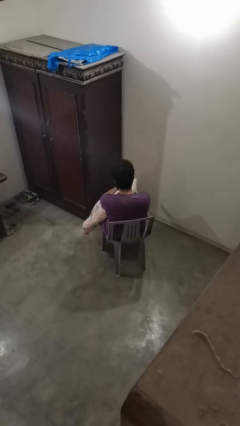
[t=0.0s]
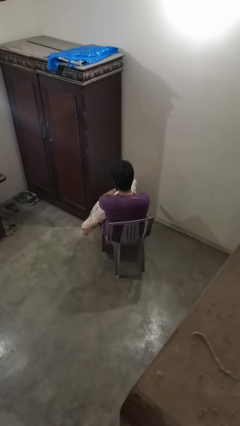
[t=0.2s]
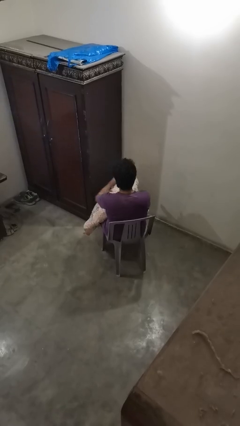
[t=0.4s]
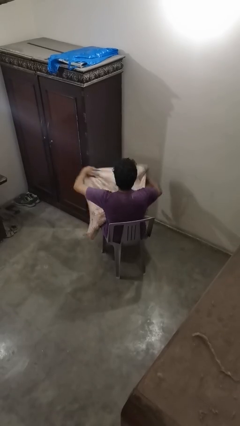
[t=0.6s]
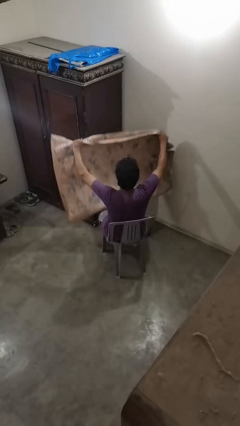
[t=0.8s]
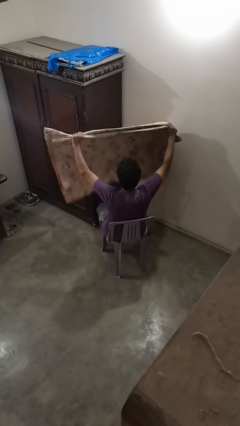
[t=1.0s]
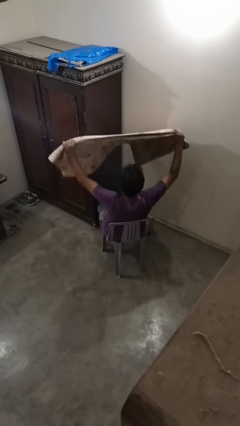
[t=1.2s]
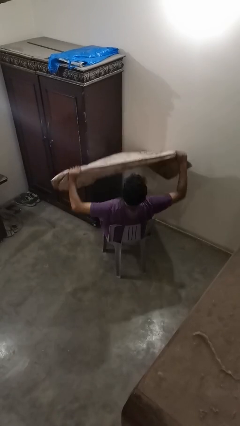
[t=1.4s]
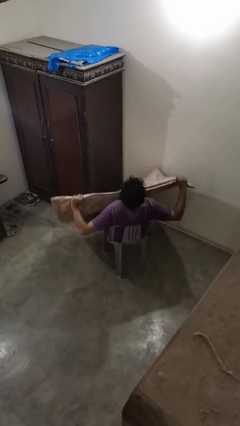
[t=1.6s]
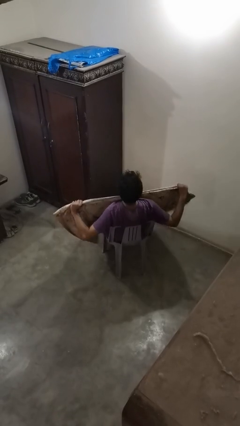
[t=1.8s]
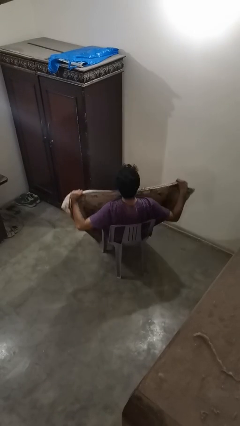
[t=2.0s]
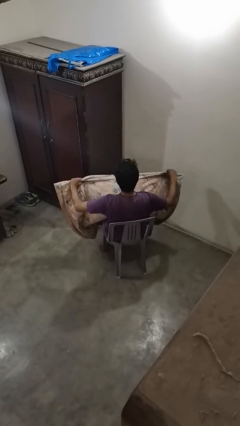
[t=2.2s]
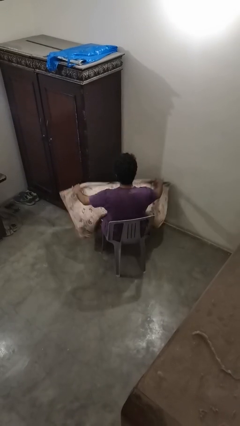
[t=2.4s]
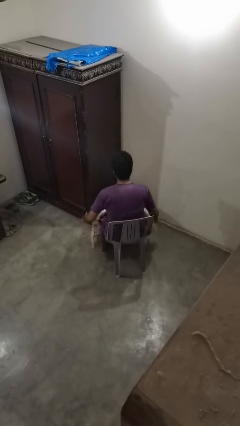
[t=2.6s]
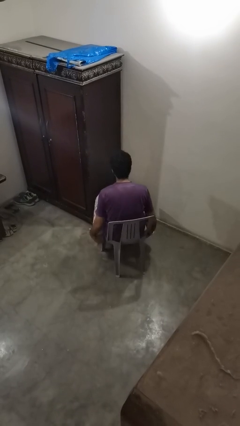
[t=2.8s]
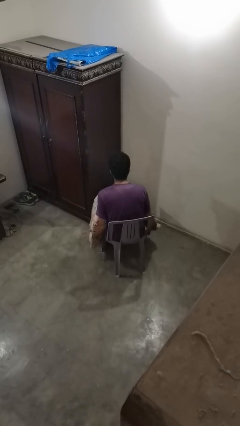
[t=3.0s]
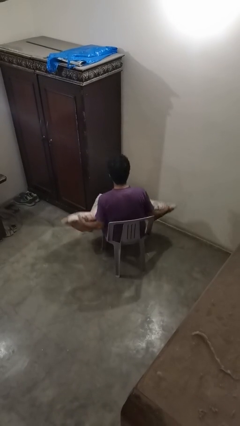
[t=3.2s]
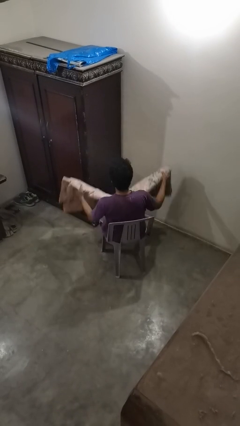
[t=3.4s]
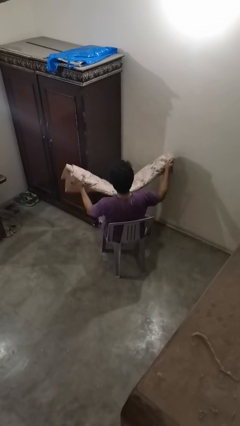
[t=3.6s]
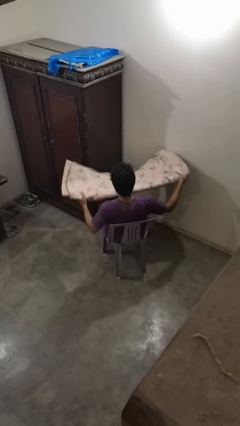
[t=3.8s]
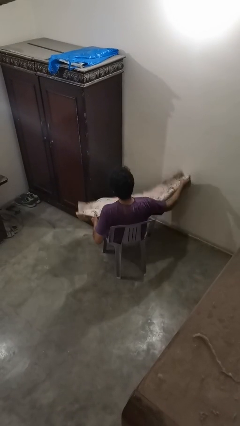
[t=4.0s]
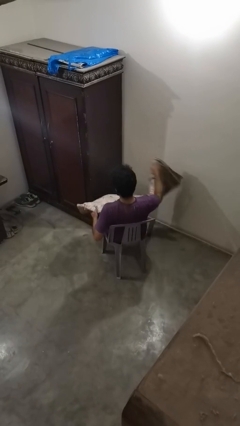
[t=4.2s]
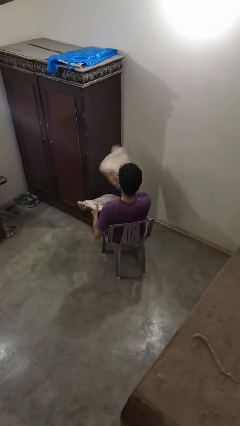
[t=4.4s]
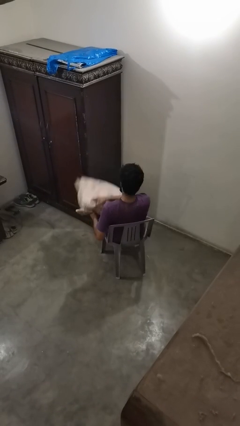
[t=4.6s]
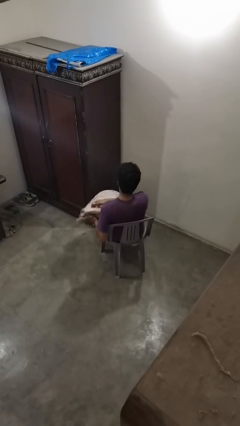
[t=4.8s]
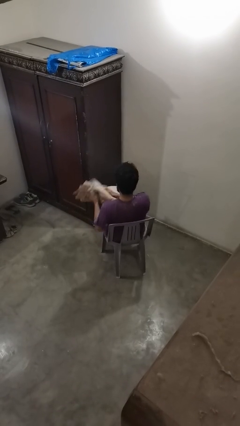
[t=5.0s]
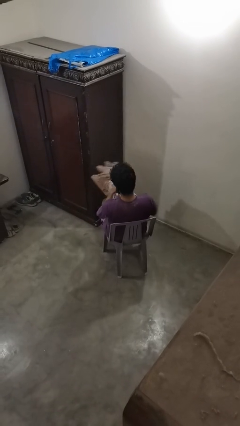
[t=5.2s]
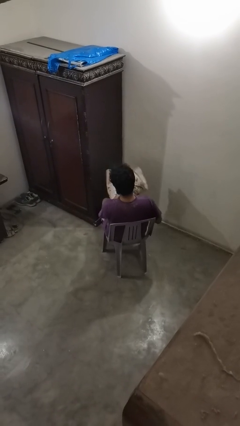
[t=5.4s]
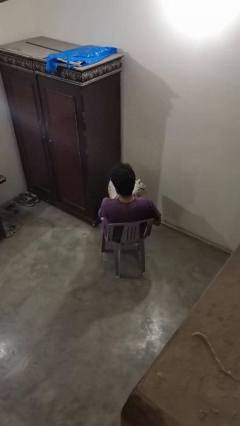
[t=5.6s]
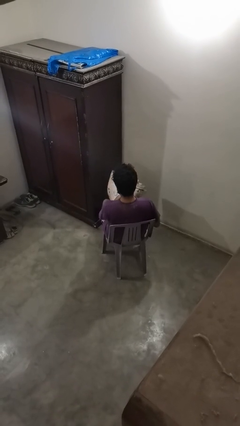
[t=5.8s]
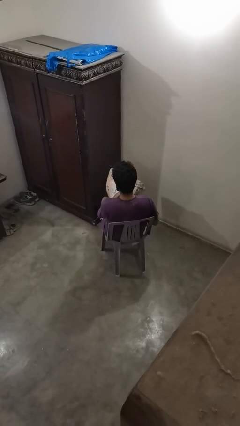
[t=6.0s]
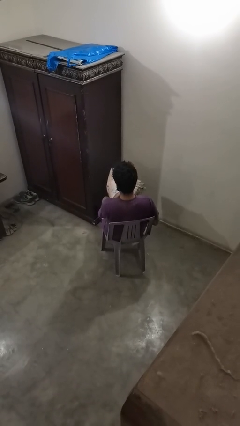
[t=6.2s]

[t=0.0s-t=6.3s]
person folds blanket

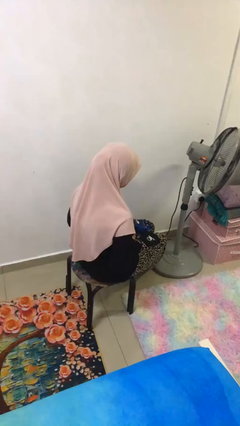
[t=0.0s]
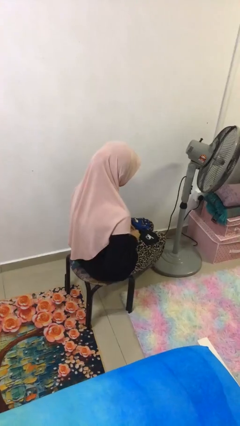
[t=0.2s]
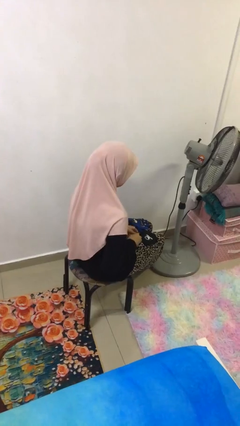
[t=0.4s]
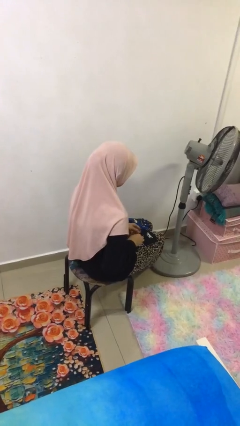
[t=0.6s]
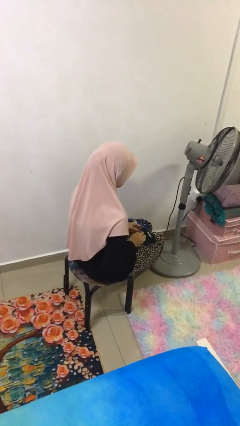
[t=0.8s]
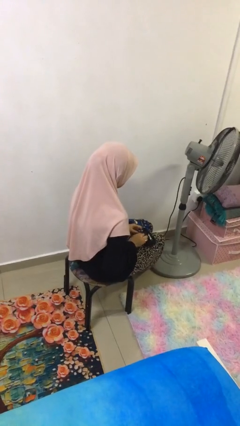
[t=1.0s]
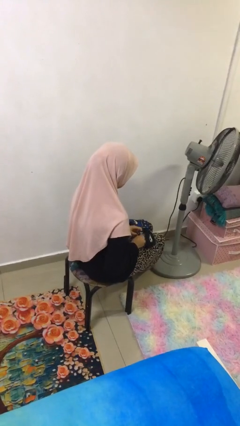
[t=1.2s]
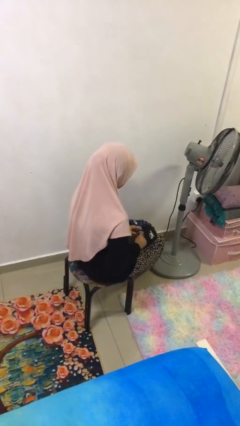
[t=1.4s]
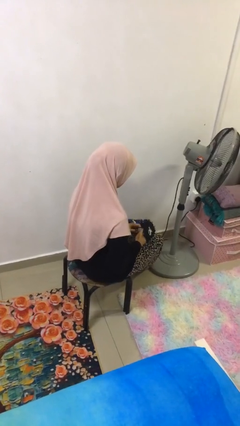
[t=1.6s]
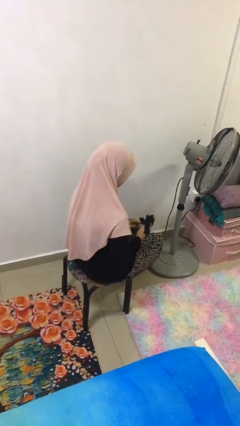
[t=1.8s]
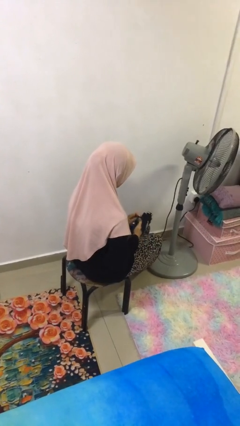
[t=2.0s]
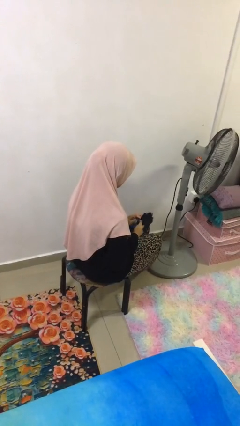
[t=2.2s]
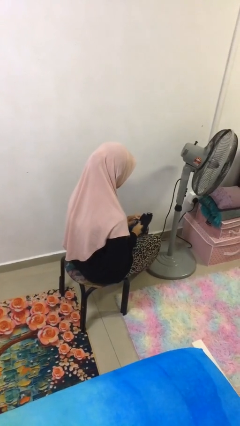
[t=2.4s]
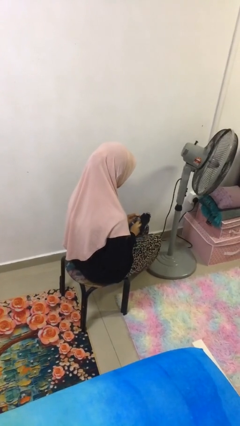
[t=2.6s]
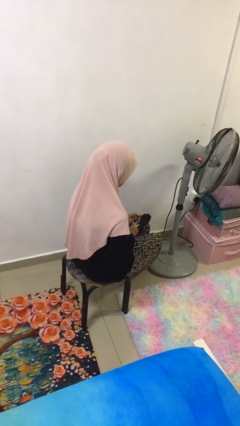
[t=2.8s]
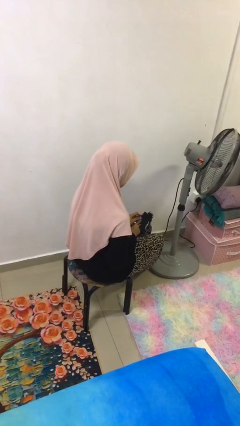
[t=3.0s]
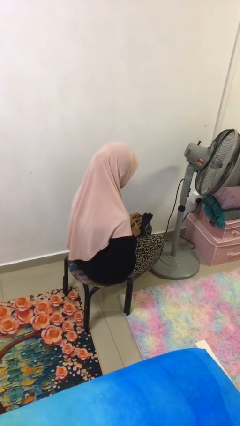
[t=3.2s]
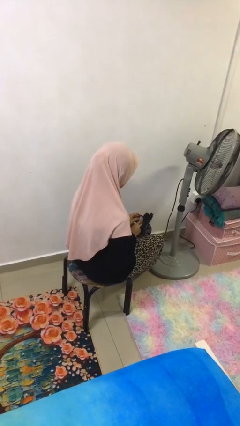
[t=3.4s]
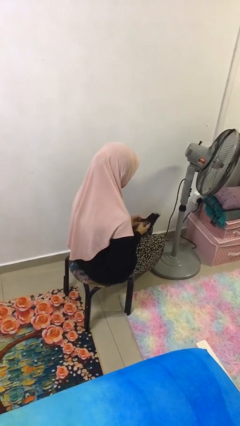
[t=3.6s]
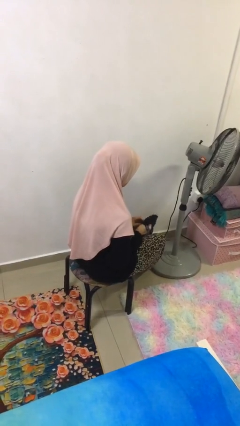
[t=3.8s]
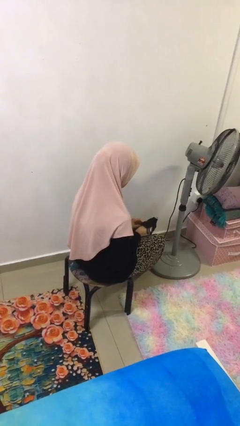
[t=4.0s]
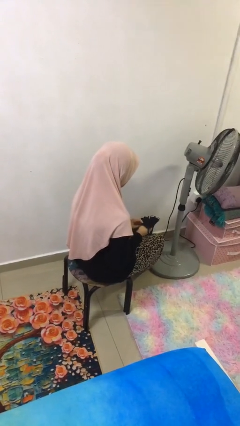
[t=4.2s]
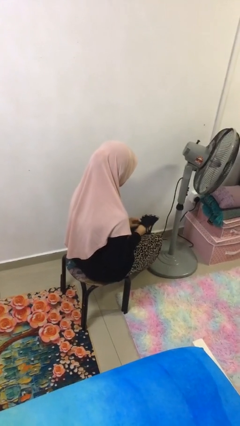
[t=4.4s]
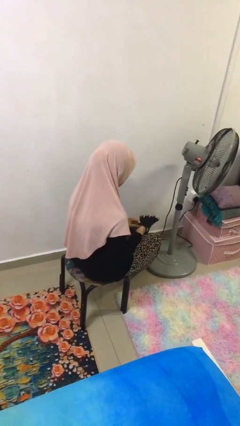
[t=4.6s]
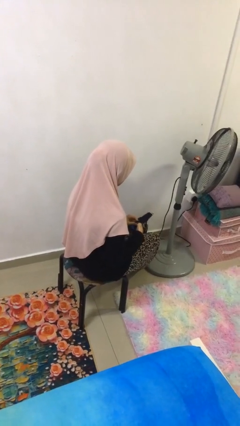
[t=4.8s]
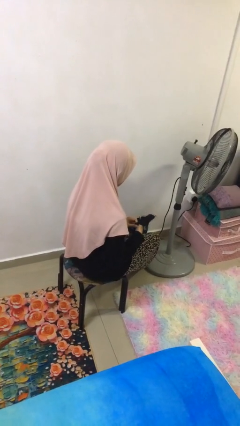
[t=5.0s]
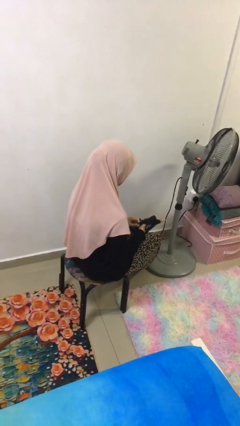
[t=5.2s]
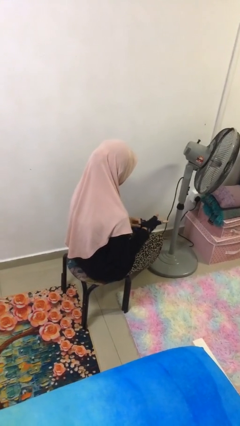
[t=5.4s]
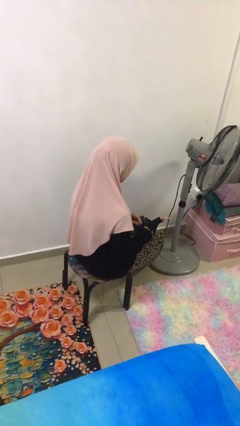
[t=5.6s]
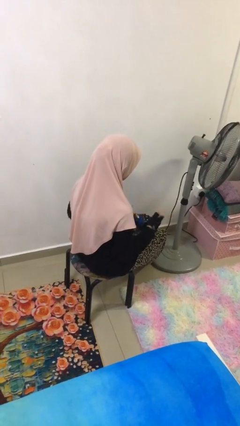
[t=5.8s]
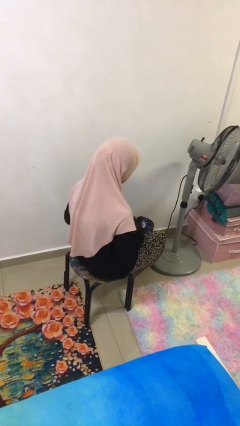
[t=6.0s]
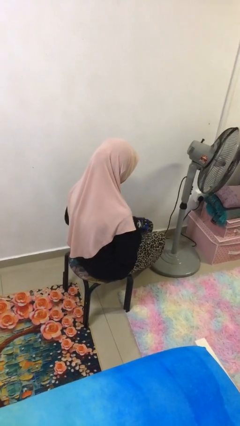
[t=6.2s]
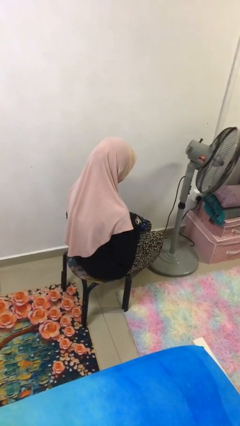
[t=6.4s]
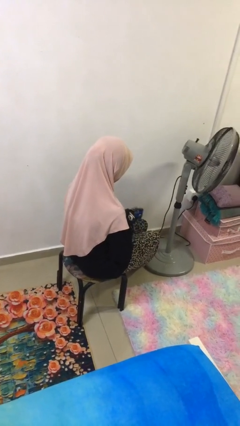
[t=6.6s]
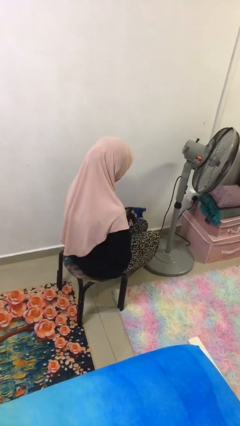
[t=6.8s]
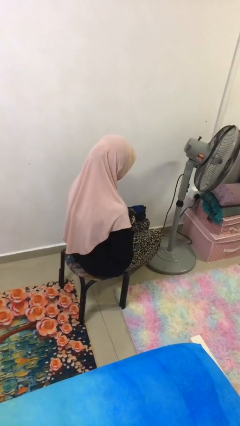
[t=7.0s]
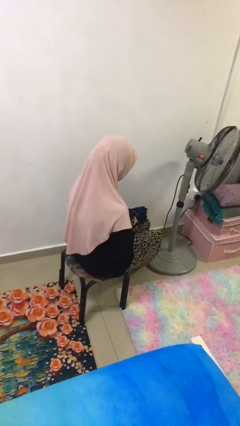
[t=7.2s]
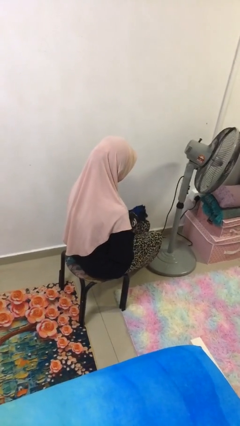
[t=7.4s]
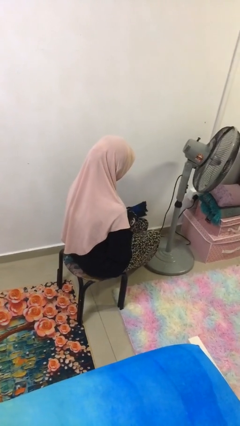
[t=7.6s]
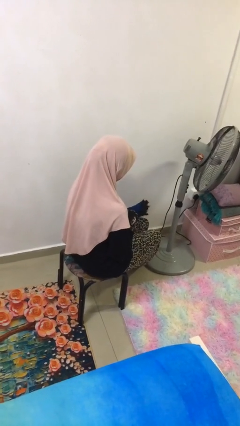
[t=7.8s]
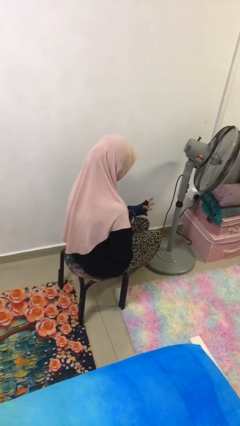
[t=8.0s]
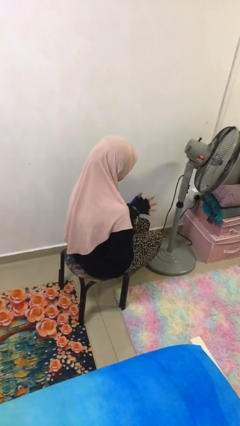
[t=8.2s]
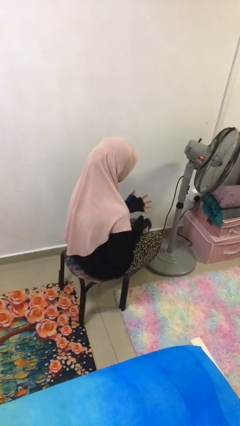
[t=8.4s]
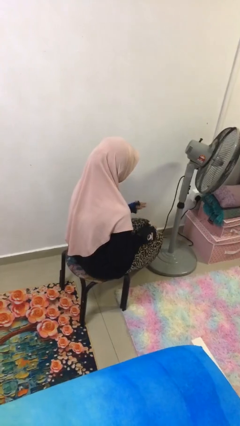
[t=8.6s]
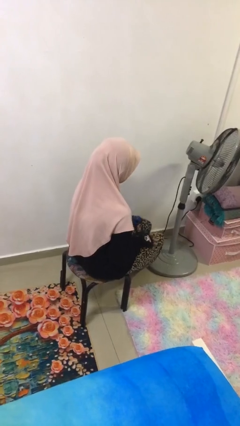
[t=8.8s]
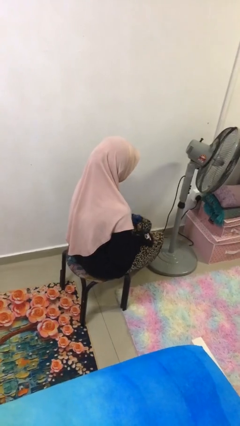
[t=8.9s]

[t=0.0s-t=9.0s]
person puts on gloves

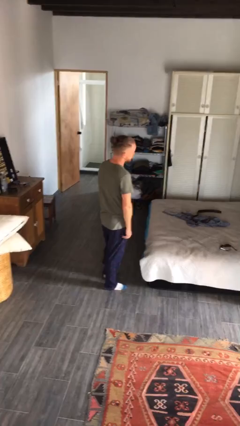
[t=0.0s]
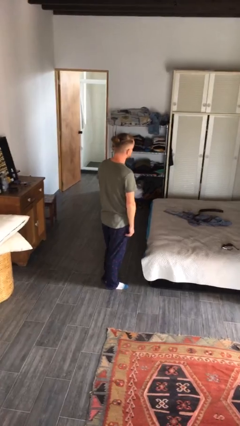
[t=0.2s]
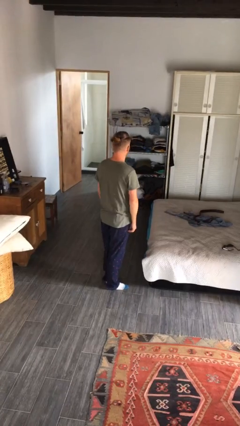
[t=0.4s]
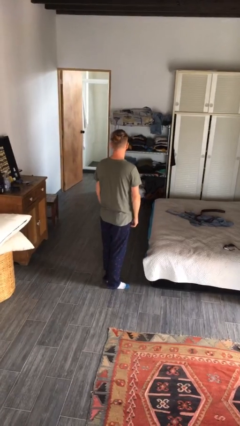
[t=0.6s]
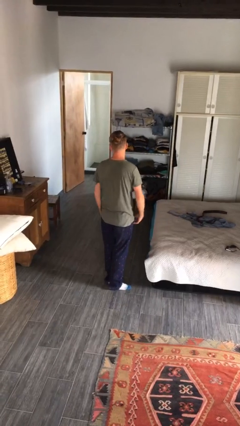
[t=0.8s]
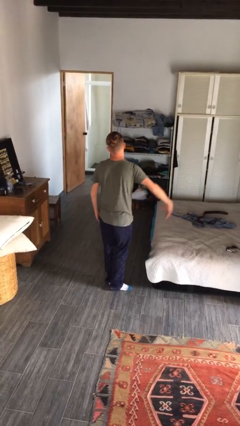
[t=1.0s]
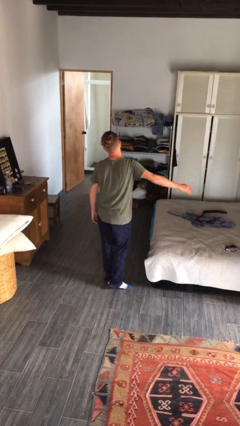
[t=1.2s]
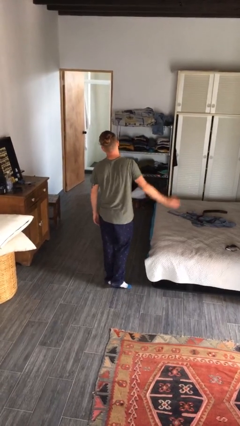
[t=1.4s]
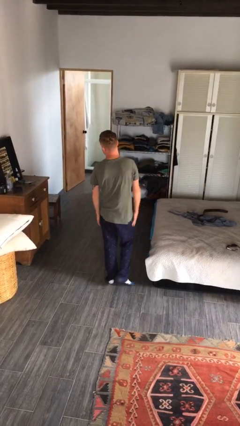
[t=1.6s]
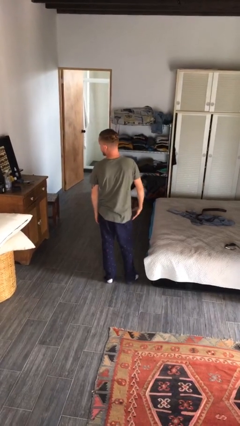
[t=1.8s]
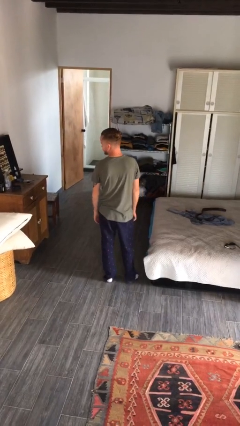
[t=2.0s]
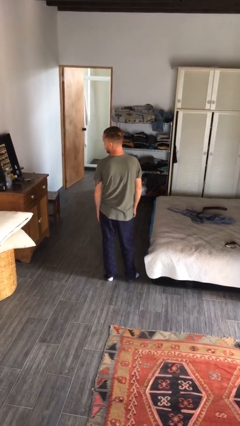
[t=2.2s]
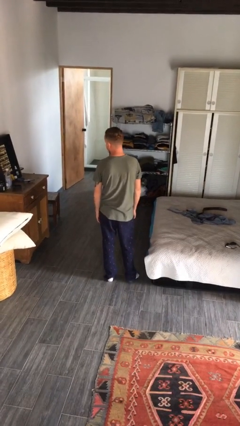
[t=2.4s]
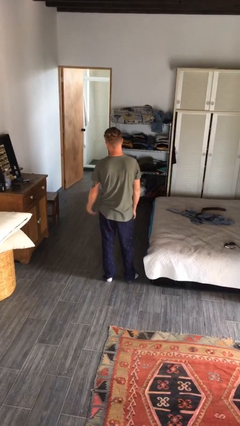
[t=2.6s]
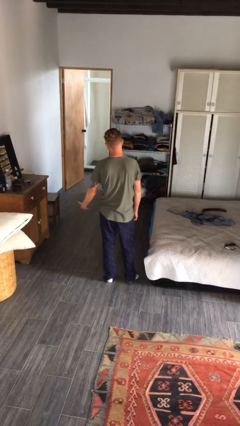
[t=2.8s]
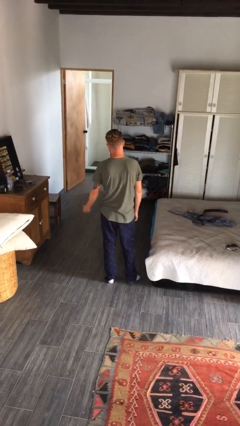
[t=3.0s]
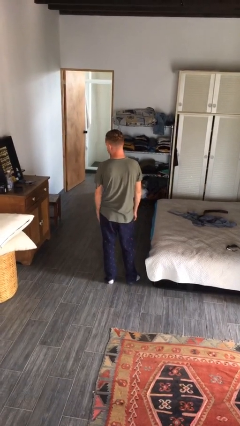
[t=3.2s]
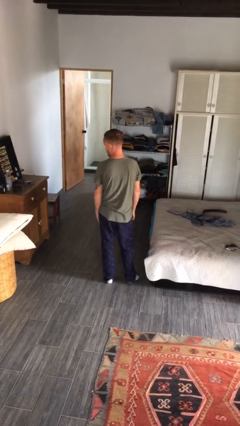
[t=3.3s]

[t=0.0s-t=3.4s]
person slaps hands on thighs
